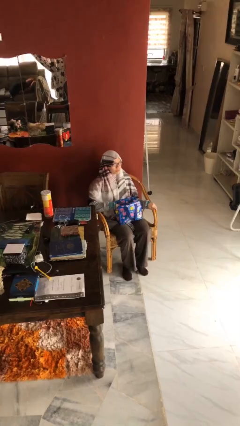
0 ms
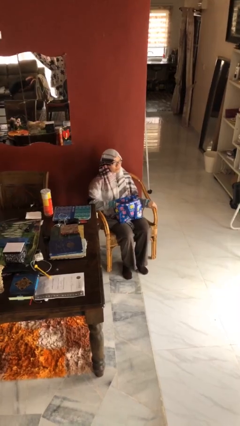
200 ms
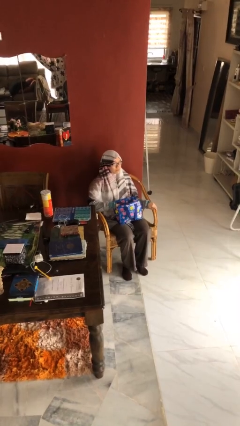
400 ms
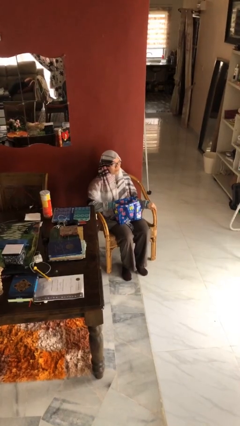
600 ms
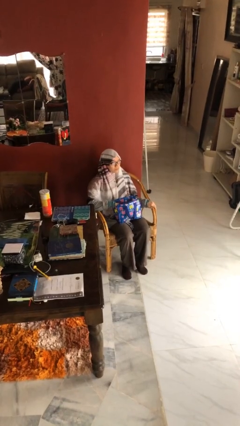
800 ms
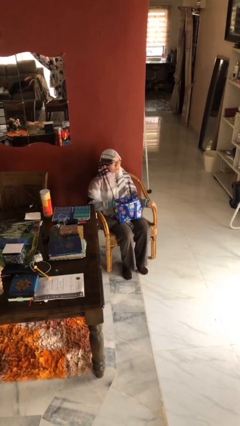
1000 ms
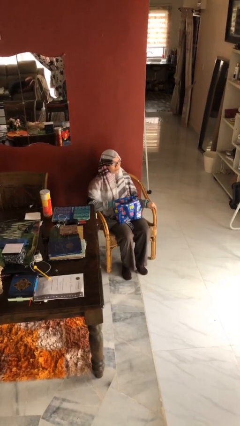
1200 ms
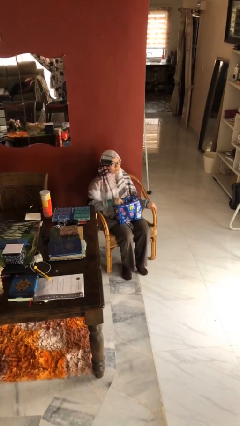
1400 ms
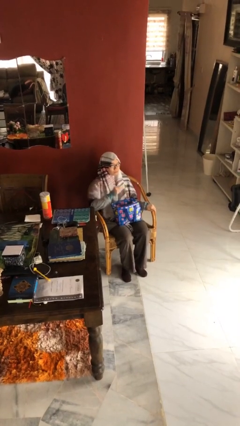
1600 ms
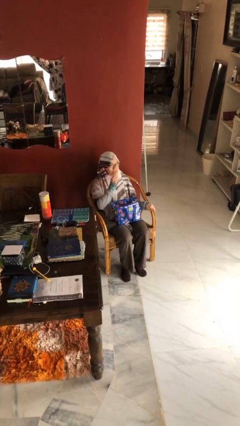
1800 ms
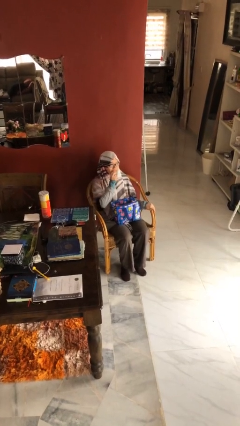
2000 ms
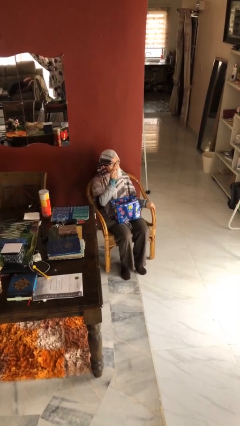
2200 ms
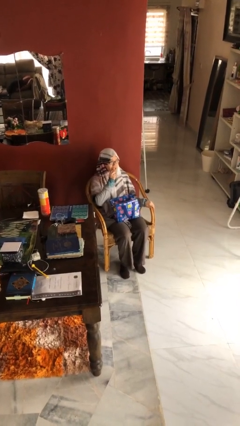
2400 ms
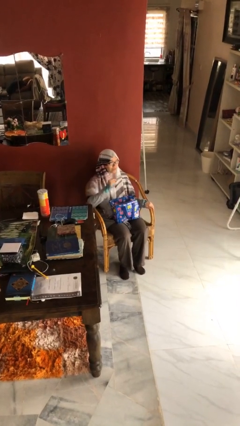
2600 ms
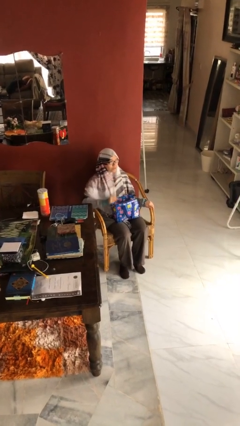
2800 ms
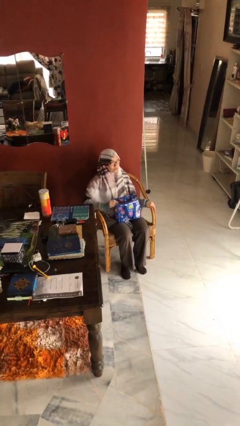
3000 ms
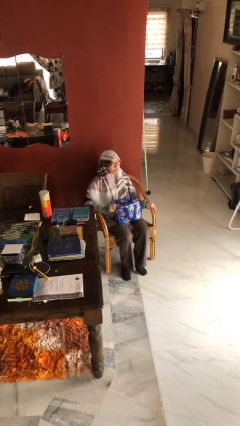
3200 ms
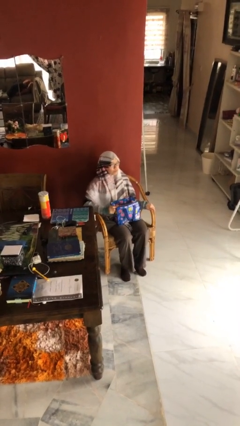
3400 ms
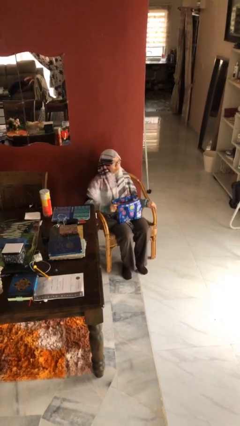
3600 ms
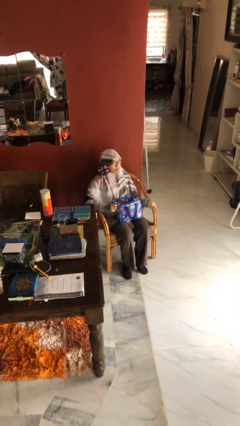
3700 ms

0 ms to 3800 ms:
person eats snack from bag

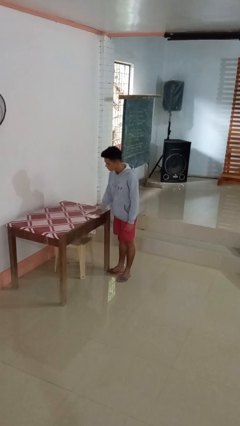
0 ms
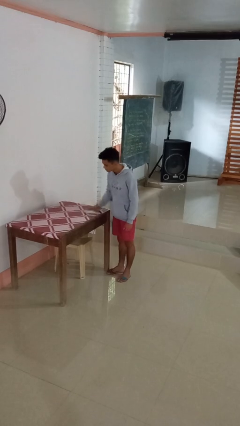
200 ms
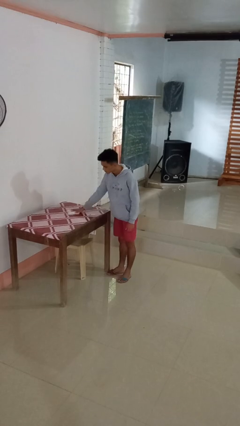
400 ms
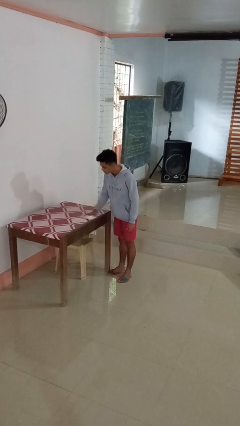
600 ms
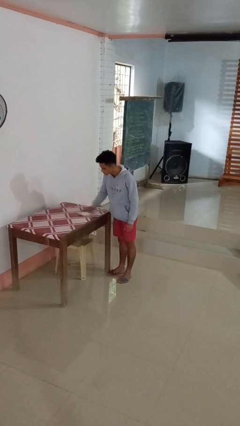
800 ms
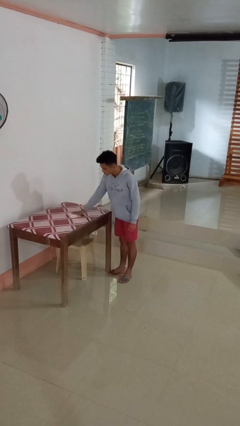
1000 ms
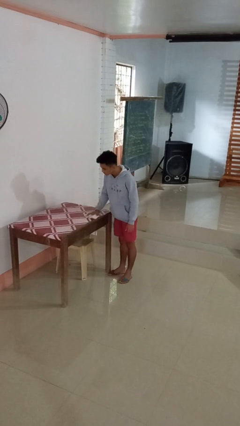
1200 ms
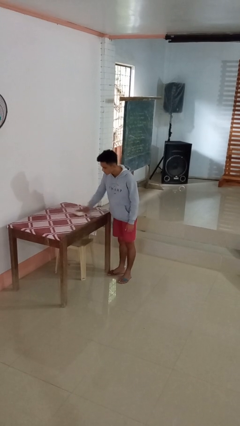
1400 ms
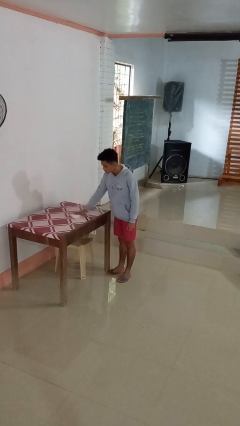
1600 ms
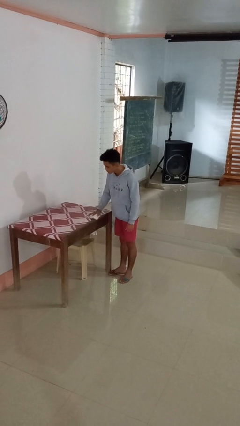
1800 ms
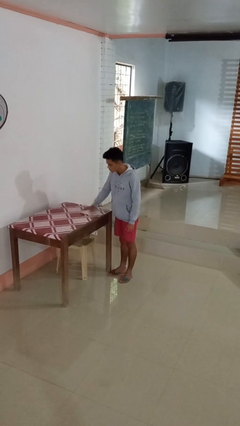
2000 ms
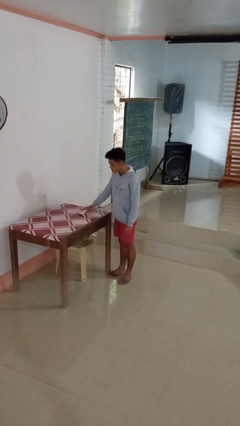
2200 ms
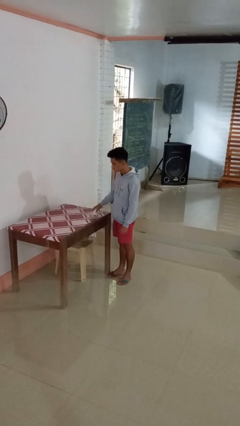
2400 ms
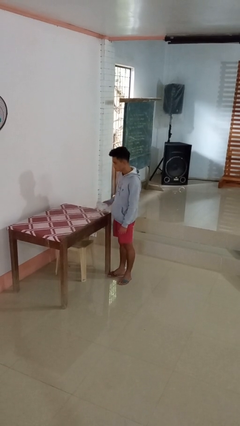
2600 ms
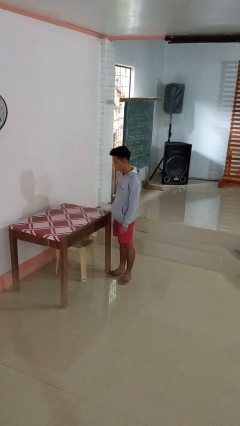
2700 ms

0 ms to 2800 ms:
person cleans table with rag

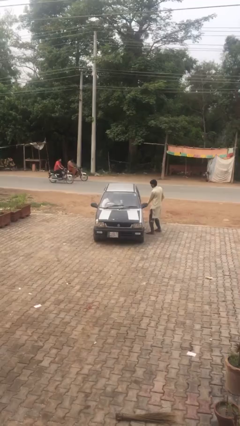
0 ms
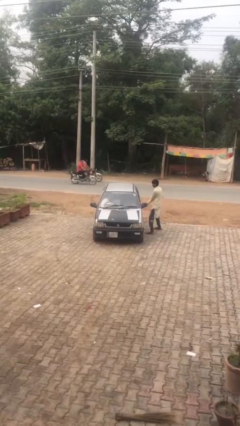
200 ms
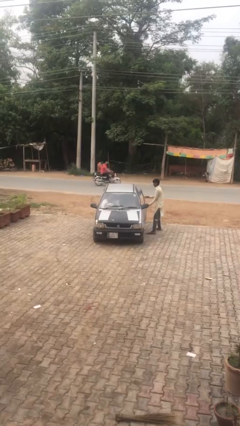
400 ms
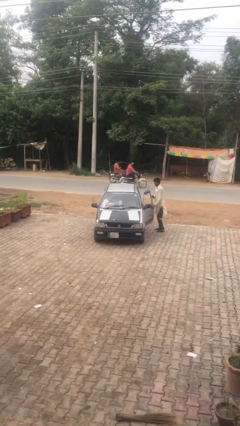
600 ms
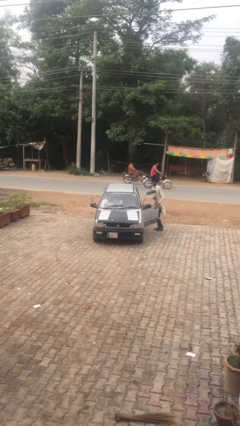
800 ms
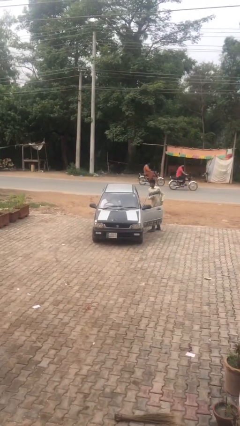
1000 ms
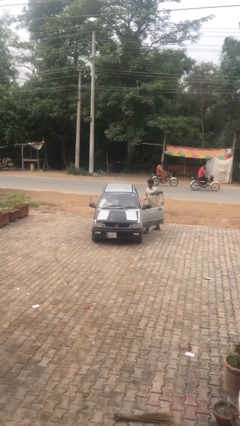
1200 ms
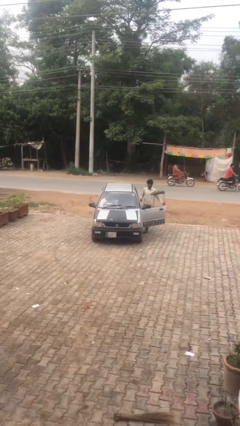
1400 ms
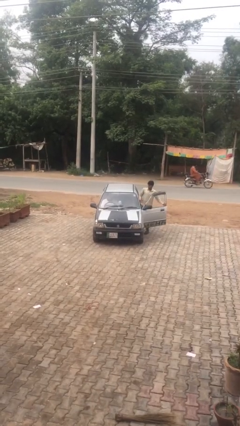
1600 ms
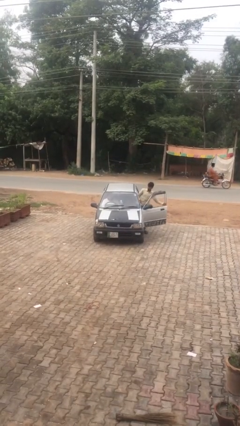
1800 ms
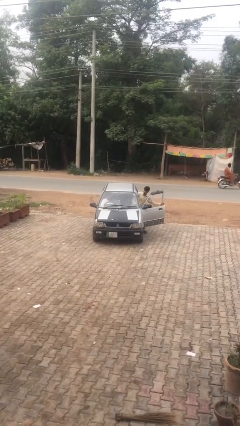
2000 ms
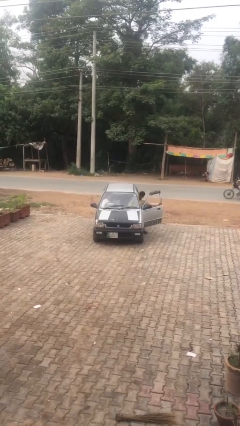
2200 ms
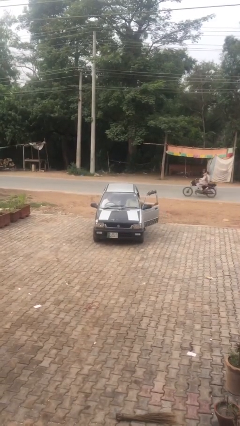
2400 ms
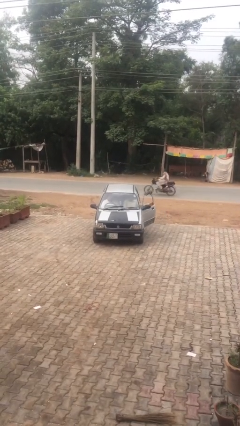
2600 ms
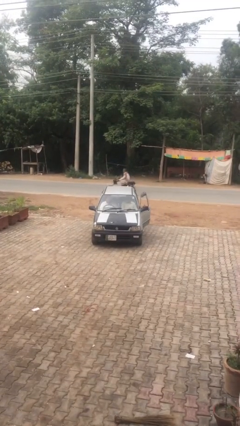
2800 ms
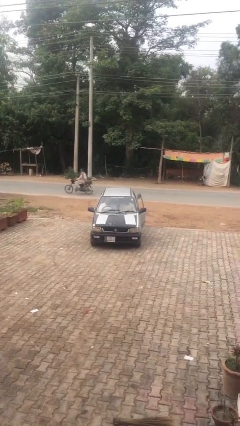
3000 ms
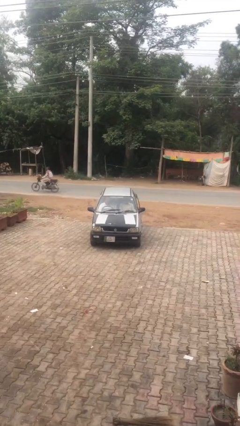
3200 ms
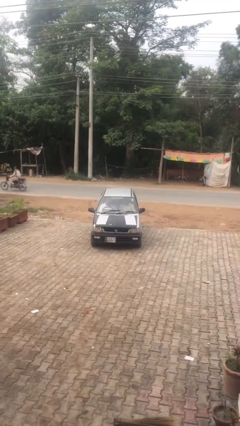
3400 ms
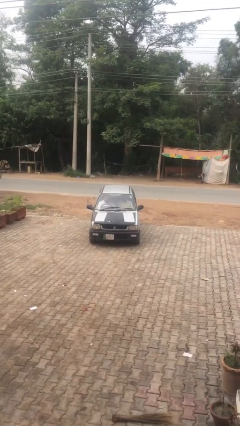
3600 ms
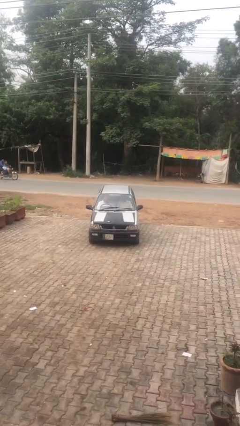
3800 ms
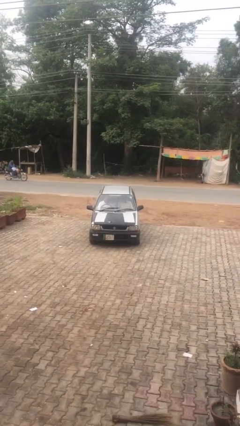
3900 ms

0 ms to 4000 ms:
car picks up person

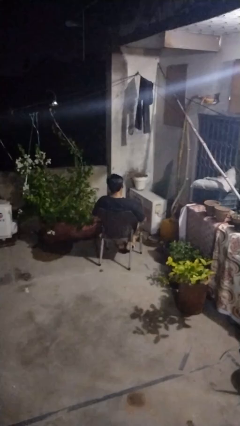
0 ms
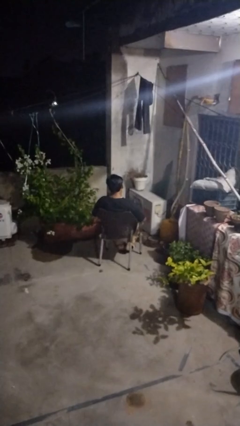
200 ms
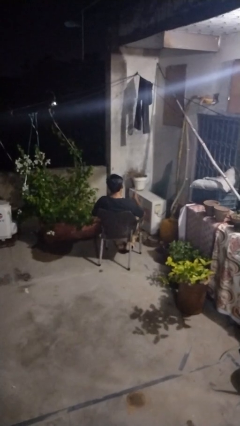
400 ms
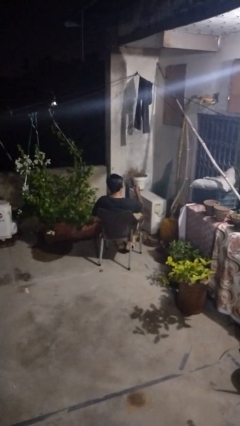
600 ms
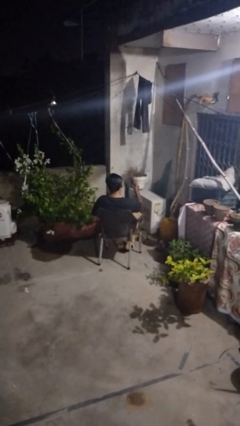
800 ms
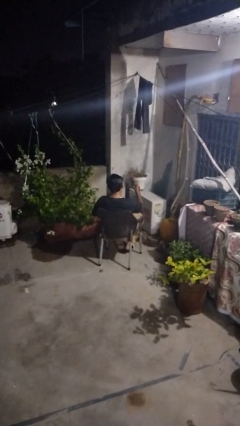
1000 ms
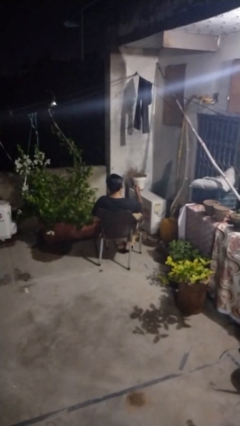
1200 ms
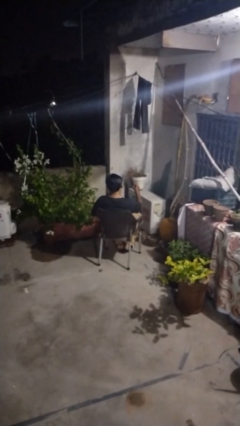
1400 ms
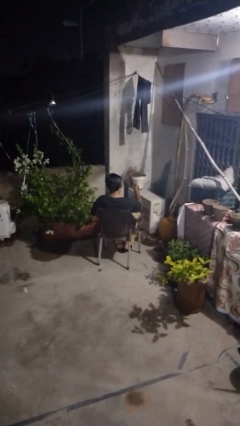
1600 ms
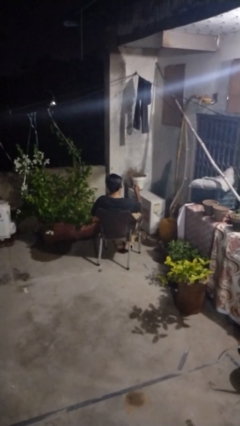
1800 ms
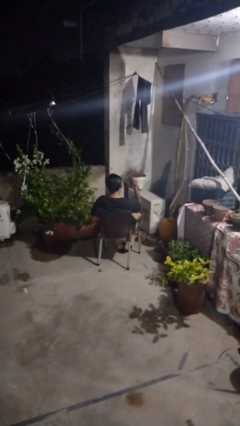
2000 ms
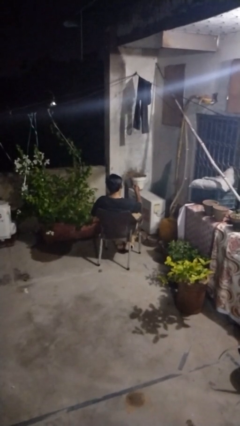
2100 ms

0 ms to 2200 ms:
person gestures number one

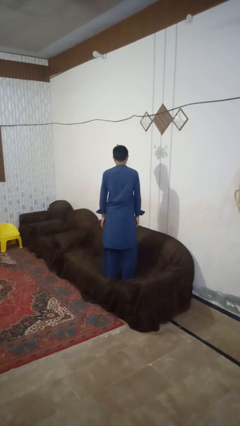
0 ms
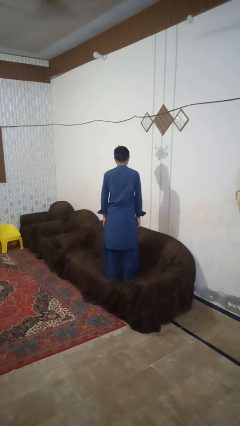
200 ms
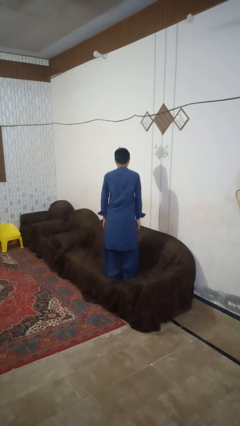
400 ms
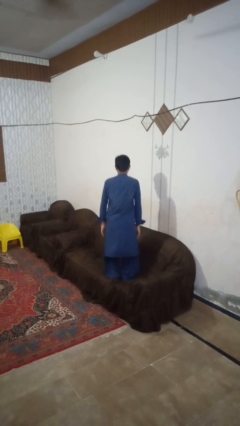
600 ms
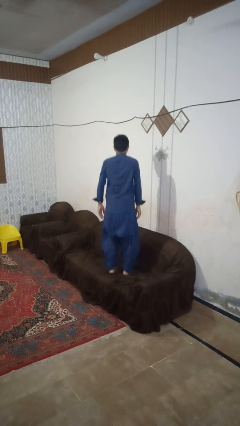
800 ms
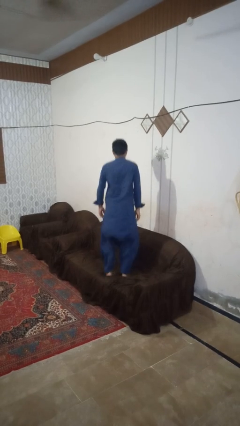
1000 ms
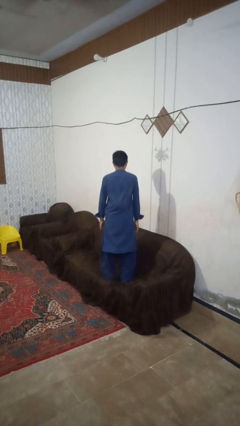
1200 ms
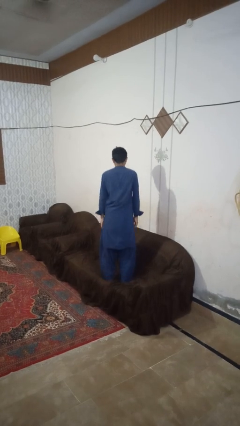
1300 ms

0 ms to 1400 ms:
person jumps on couch

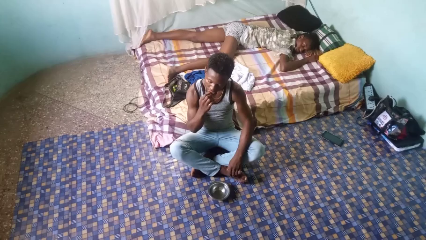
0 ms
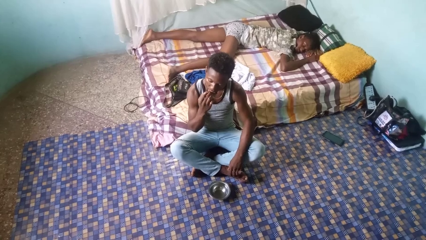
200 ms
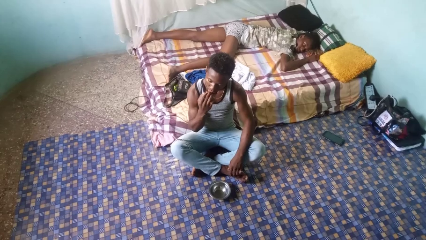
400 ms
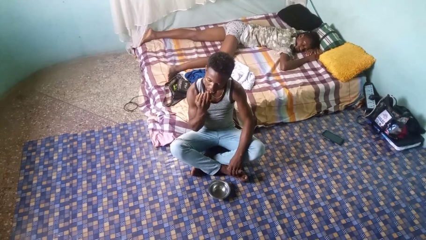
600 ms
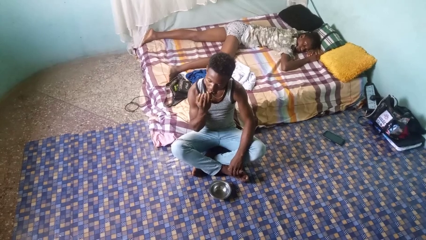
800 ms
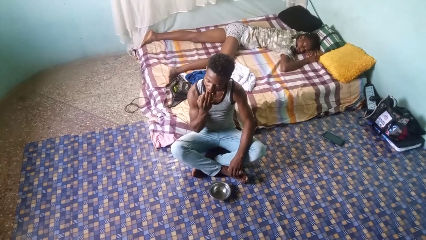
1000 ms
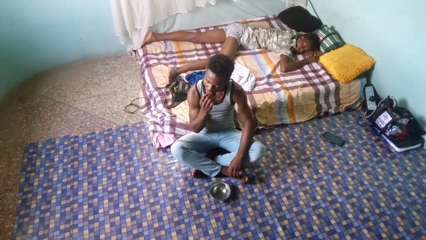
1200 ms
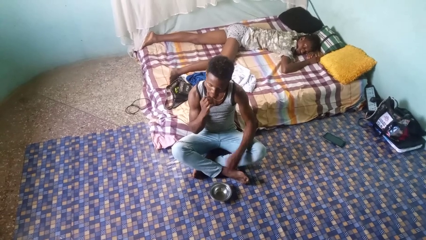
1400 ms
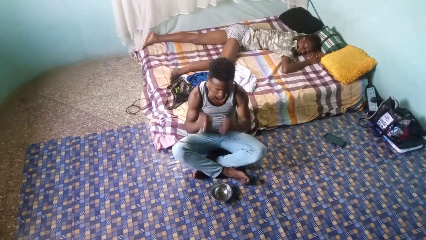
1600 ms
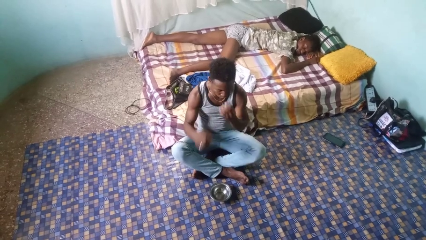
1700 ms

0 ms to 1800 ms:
person licks fingers

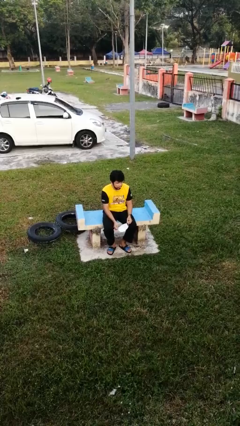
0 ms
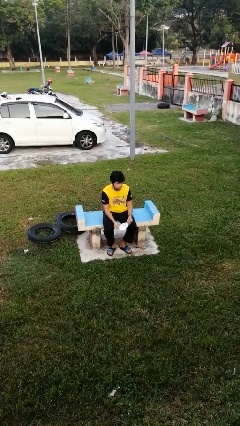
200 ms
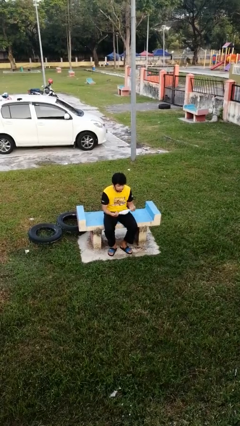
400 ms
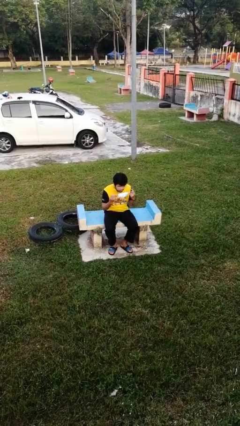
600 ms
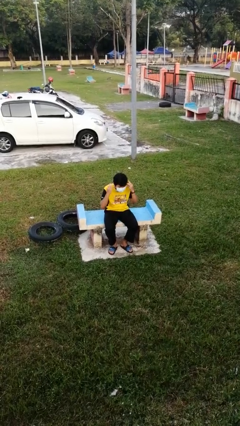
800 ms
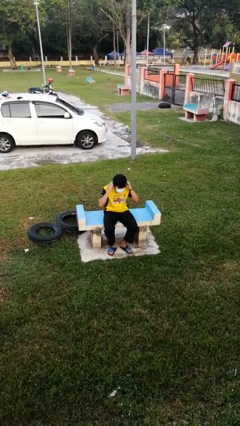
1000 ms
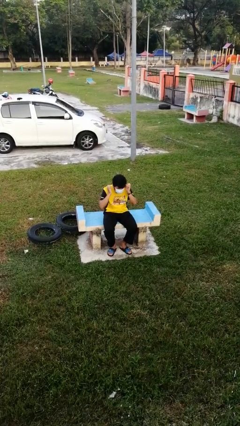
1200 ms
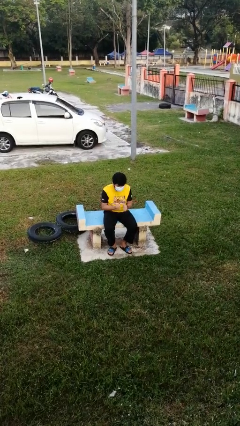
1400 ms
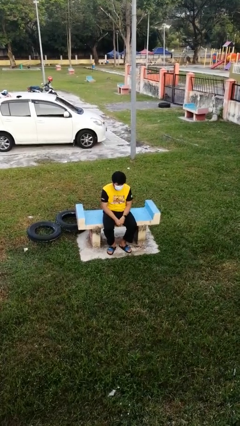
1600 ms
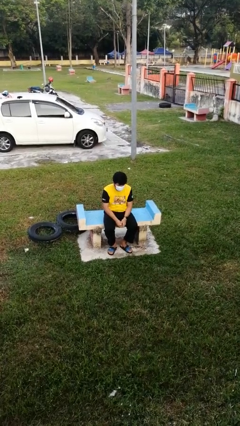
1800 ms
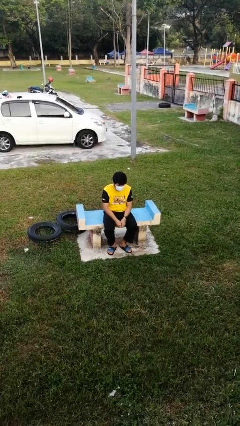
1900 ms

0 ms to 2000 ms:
person puts on facemask
